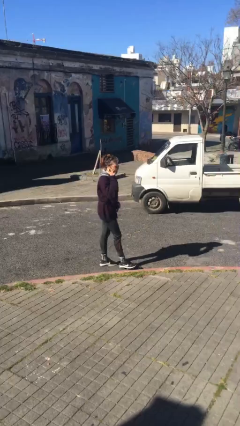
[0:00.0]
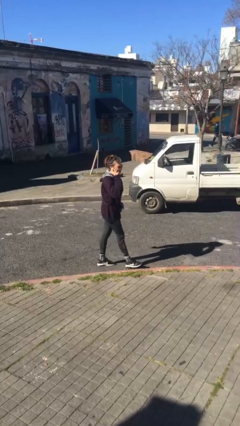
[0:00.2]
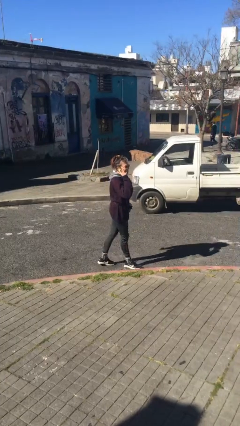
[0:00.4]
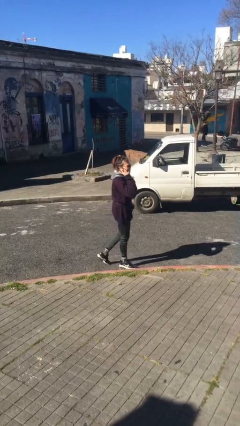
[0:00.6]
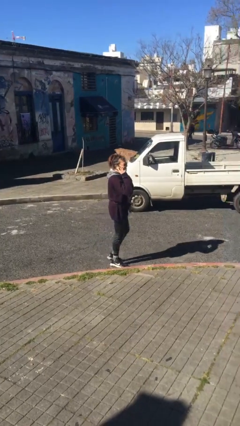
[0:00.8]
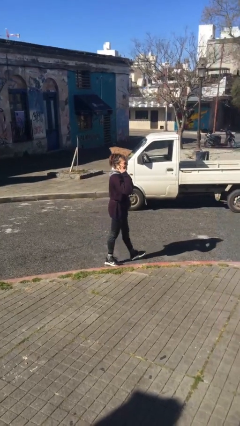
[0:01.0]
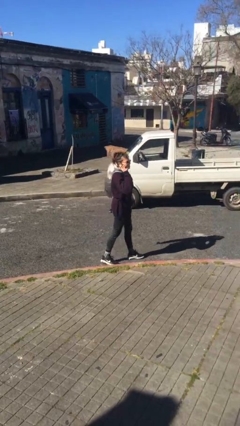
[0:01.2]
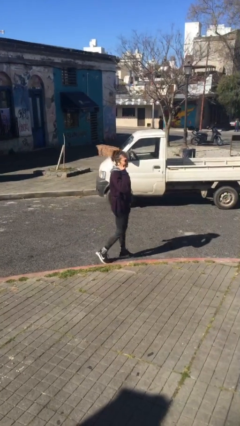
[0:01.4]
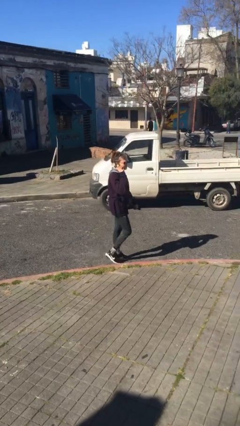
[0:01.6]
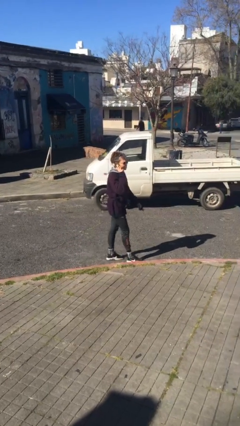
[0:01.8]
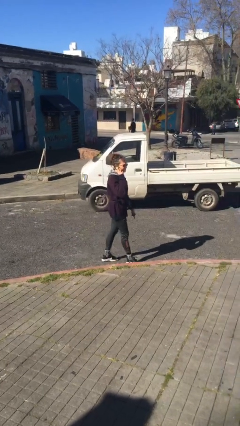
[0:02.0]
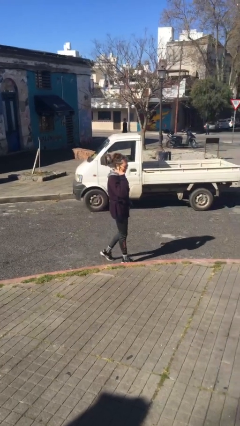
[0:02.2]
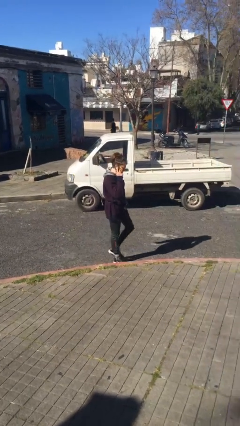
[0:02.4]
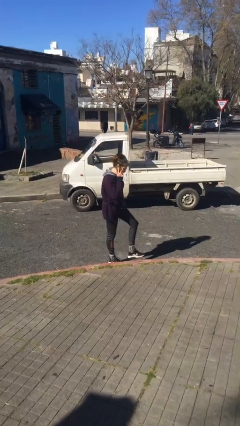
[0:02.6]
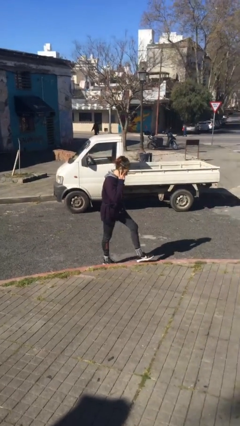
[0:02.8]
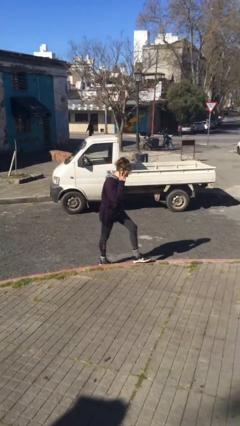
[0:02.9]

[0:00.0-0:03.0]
person talks on phone

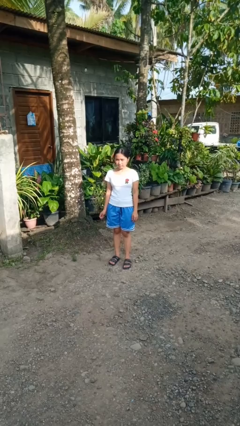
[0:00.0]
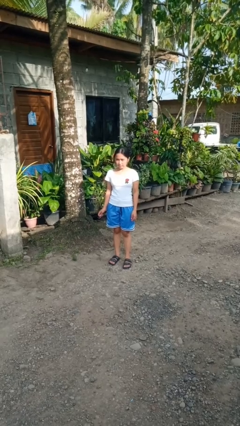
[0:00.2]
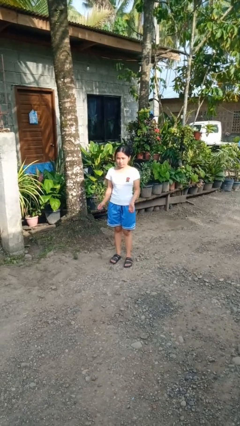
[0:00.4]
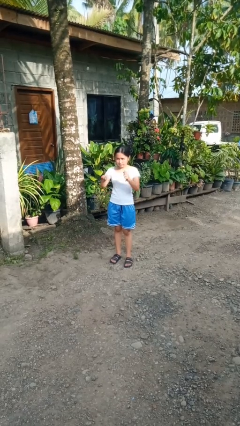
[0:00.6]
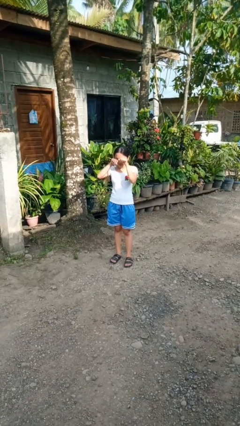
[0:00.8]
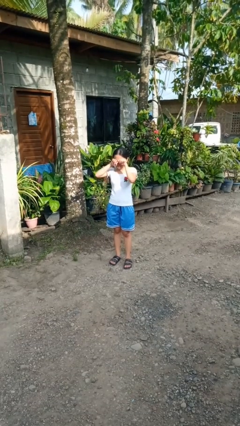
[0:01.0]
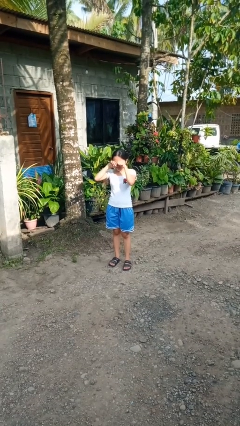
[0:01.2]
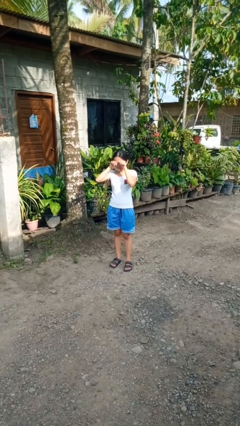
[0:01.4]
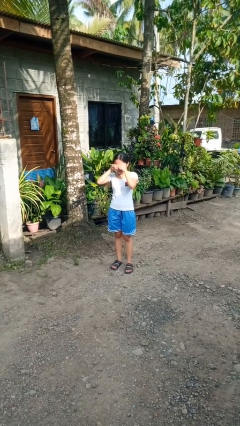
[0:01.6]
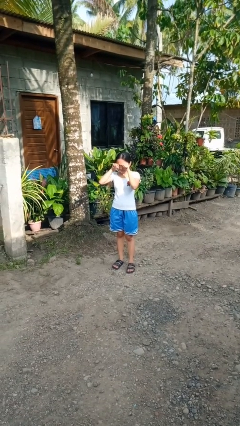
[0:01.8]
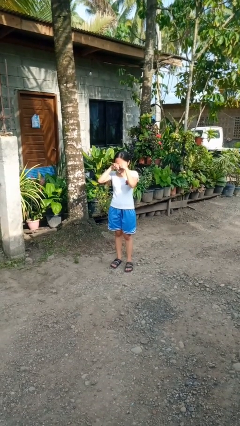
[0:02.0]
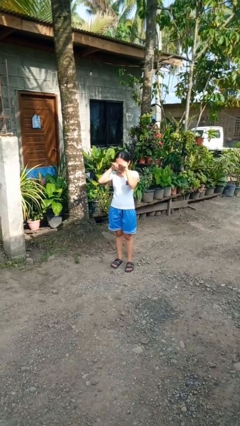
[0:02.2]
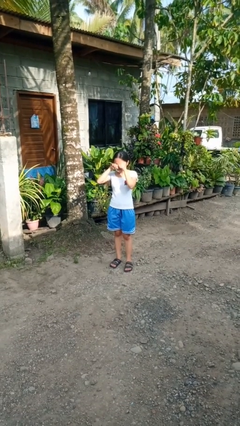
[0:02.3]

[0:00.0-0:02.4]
person rubs eyes

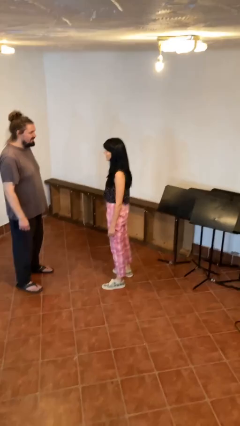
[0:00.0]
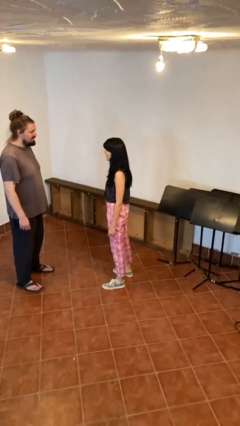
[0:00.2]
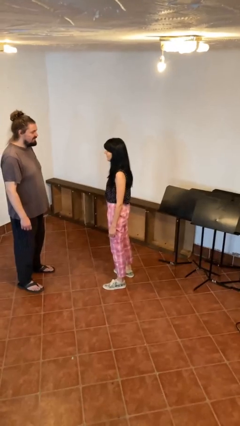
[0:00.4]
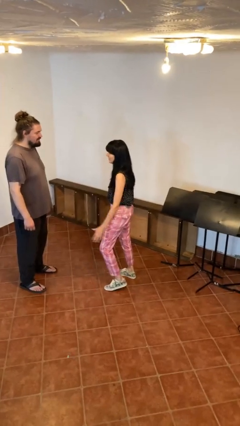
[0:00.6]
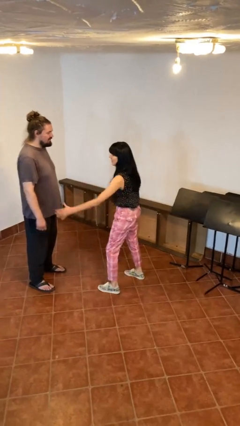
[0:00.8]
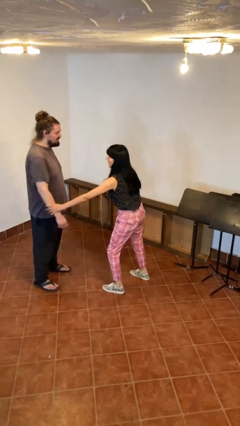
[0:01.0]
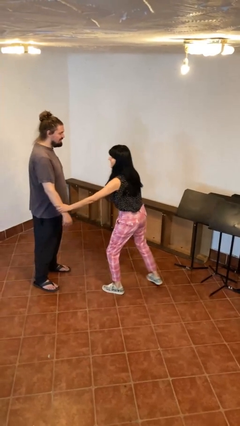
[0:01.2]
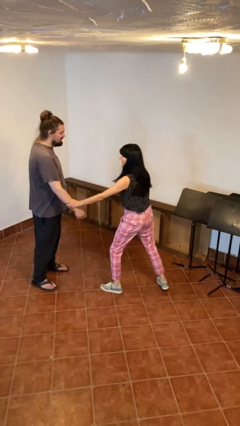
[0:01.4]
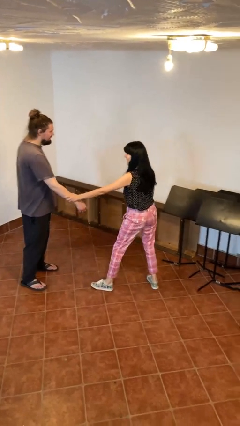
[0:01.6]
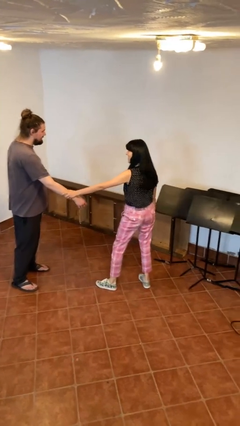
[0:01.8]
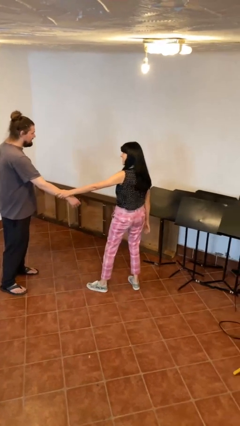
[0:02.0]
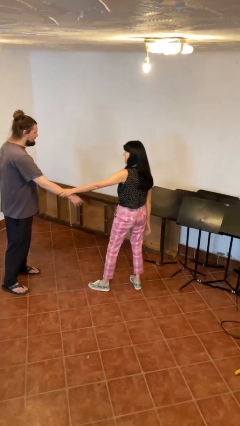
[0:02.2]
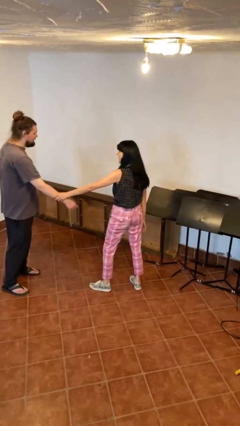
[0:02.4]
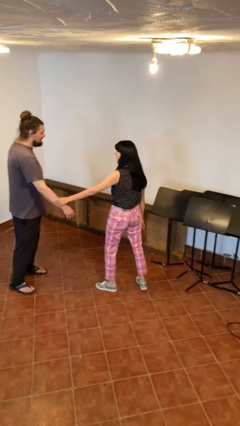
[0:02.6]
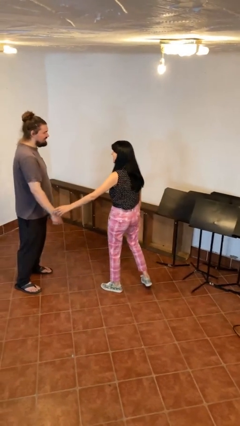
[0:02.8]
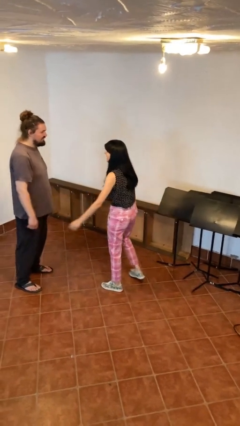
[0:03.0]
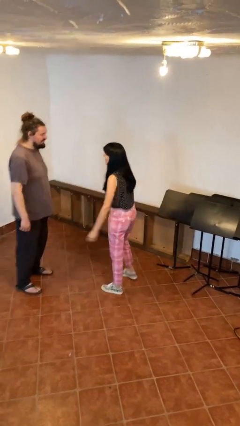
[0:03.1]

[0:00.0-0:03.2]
person grabs person by forearm

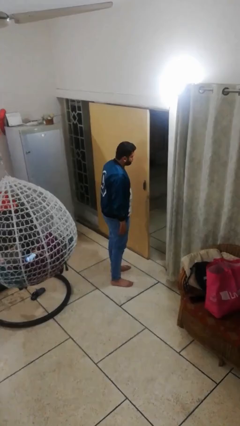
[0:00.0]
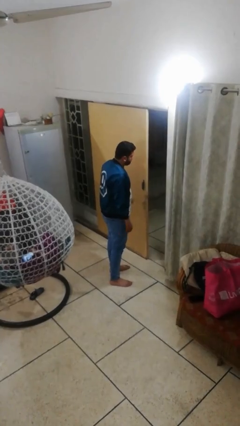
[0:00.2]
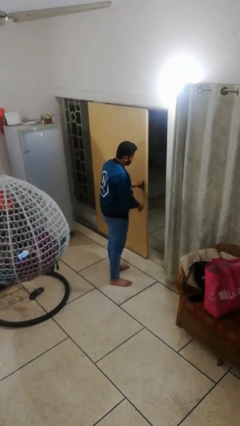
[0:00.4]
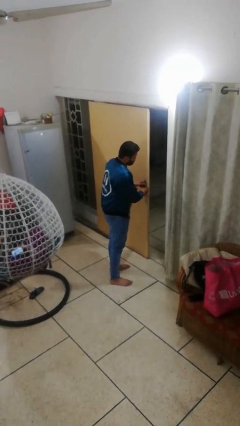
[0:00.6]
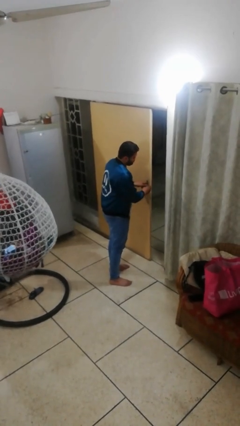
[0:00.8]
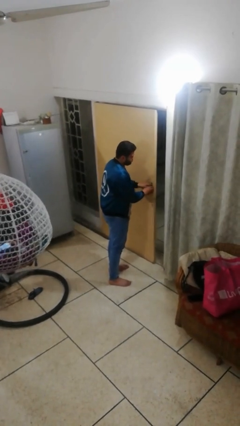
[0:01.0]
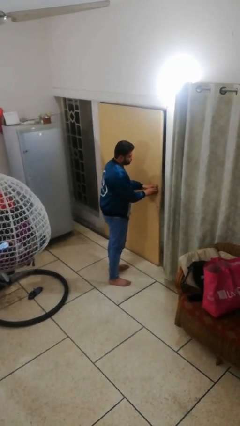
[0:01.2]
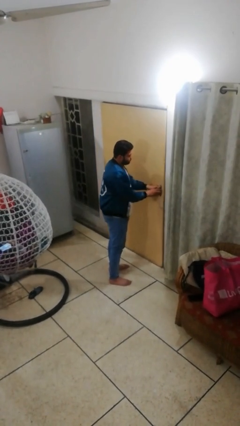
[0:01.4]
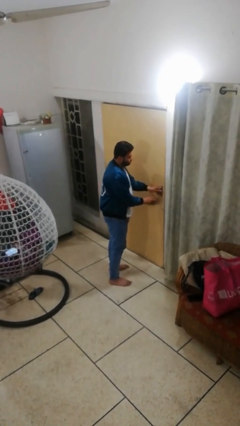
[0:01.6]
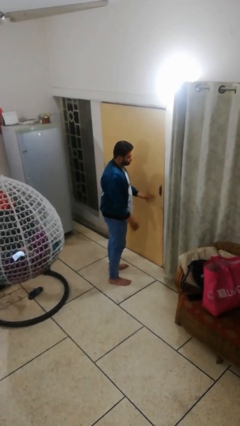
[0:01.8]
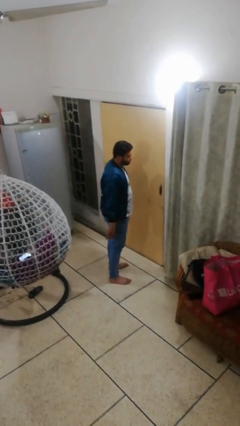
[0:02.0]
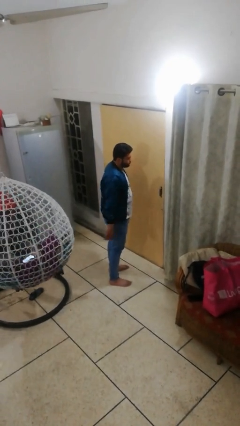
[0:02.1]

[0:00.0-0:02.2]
person closes facility door

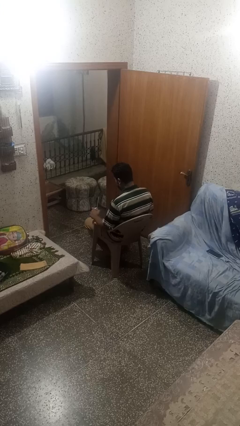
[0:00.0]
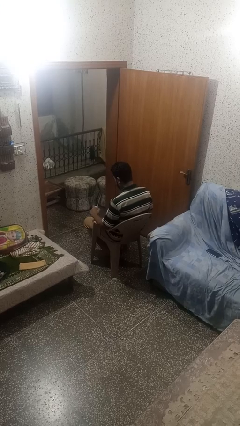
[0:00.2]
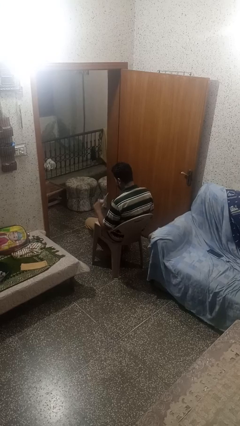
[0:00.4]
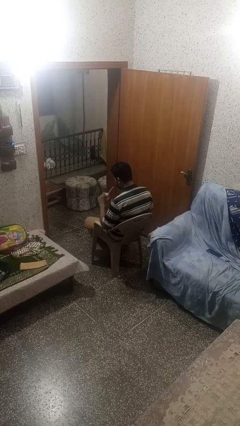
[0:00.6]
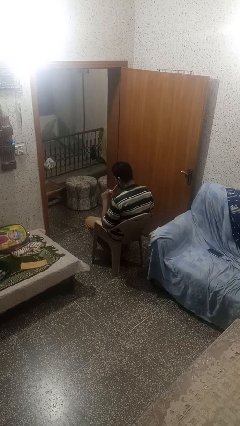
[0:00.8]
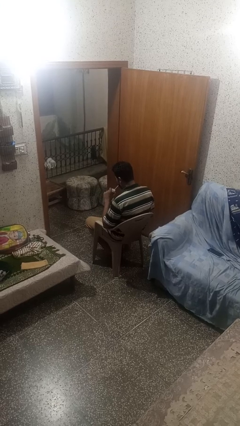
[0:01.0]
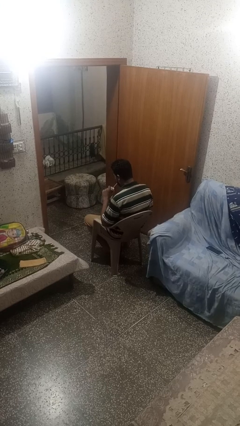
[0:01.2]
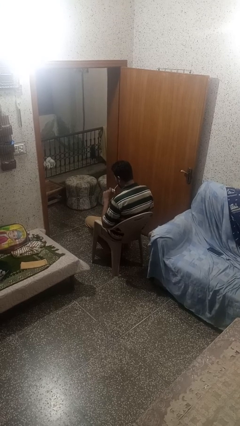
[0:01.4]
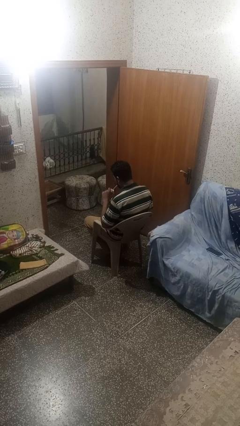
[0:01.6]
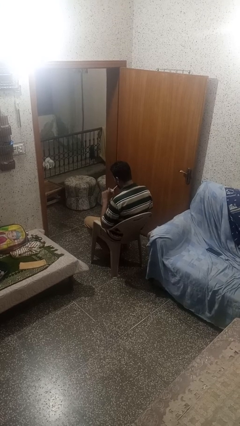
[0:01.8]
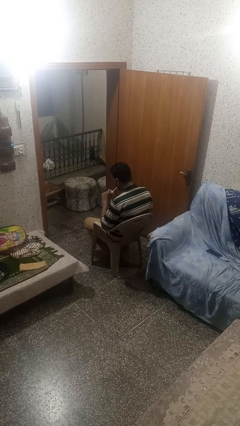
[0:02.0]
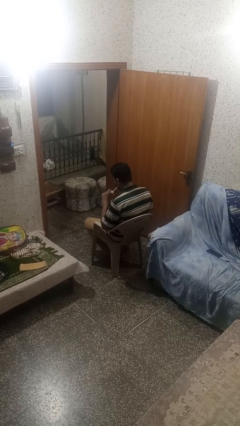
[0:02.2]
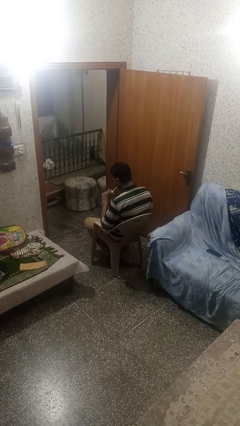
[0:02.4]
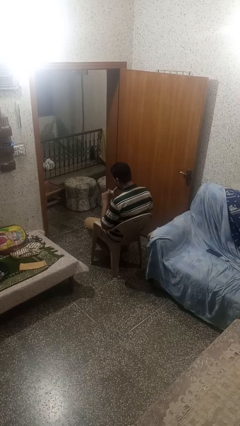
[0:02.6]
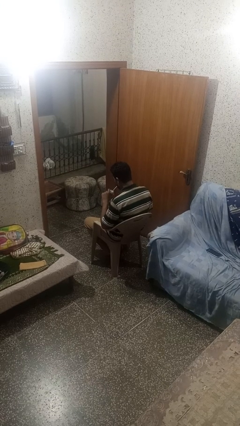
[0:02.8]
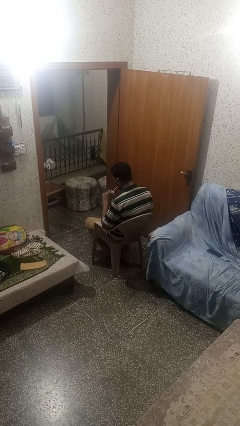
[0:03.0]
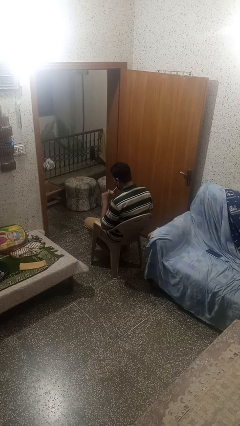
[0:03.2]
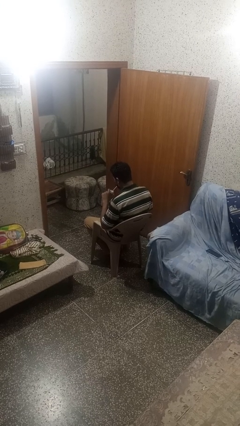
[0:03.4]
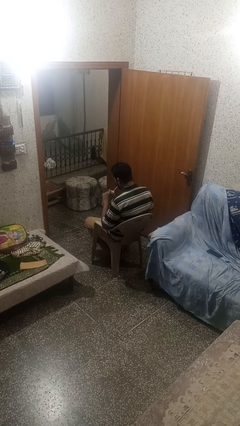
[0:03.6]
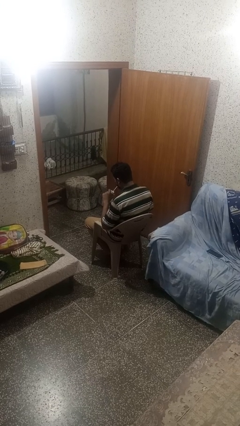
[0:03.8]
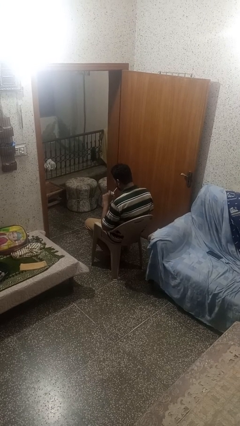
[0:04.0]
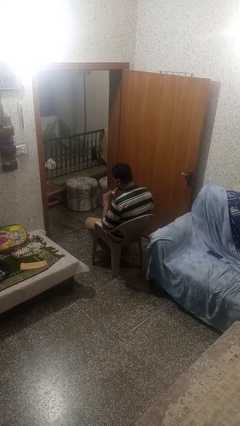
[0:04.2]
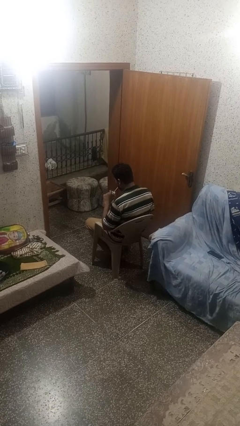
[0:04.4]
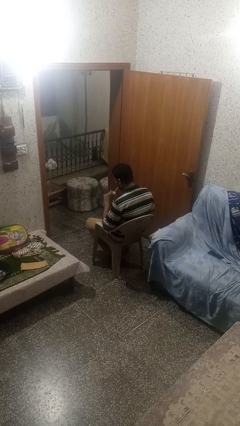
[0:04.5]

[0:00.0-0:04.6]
person drinks from straw

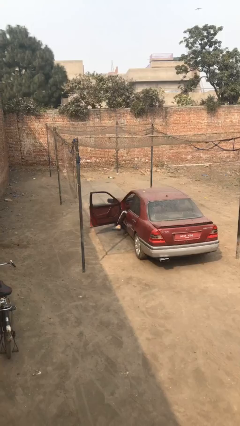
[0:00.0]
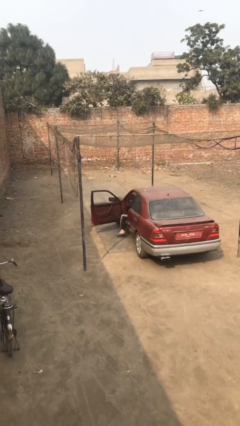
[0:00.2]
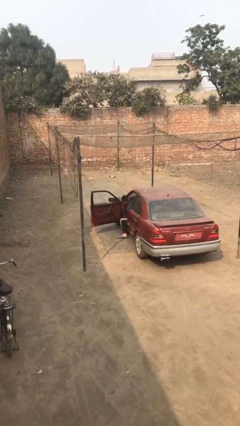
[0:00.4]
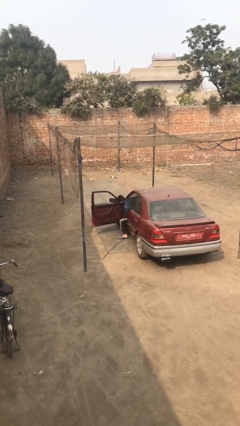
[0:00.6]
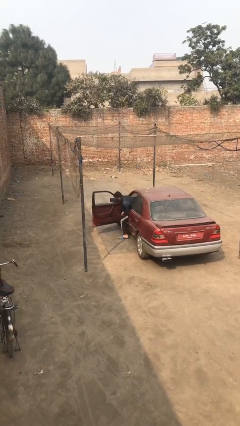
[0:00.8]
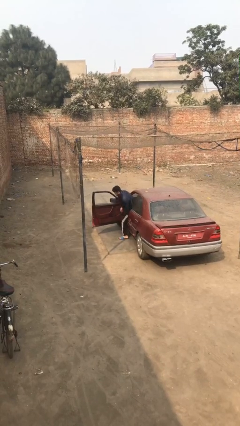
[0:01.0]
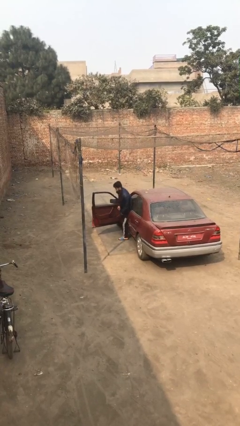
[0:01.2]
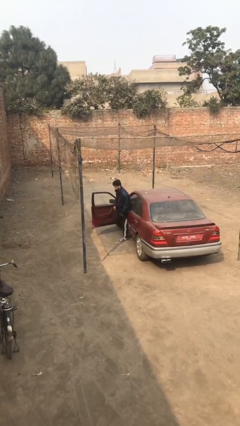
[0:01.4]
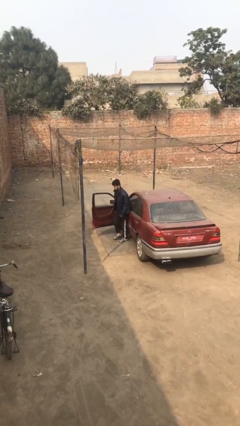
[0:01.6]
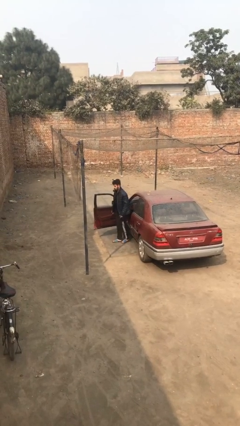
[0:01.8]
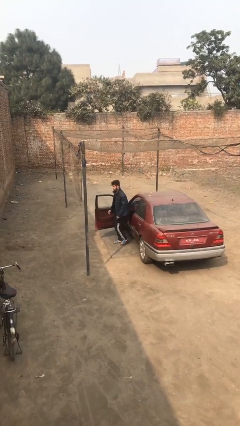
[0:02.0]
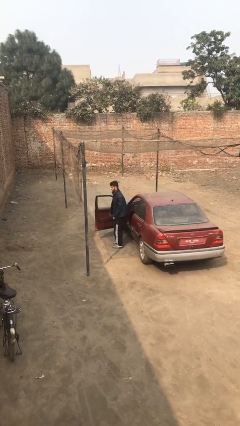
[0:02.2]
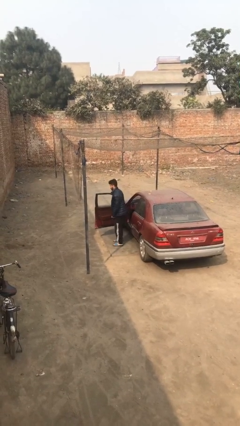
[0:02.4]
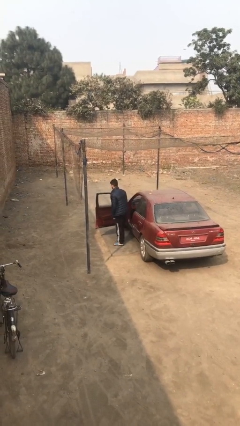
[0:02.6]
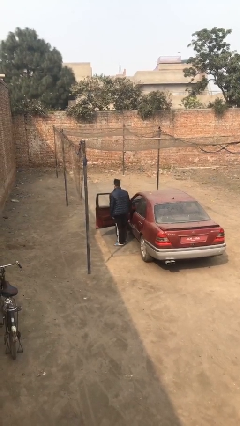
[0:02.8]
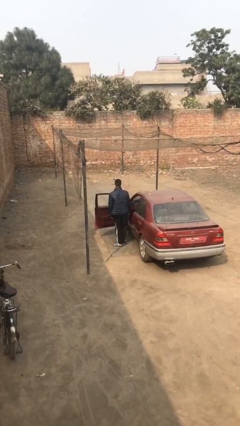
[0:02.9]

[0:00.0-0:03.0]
person exits car
